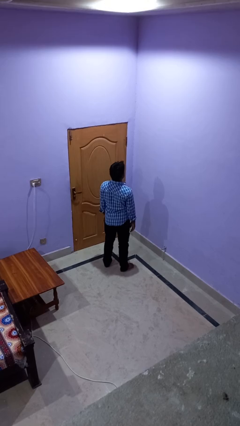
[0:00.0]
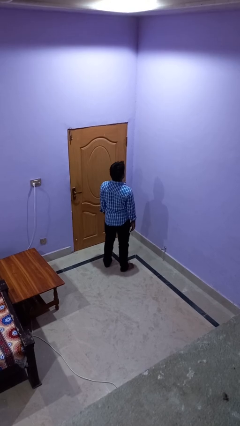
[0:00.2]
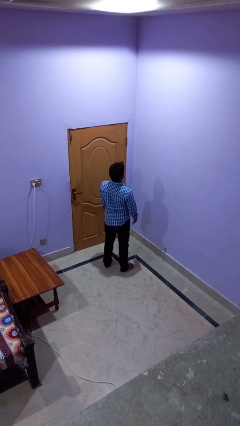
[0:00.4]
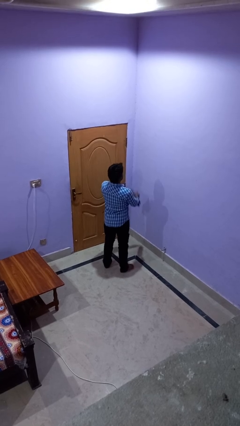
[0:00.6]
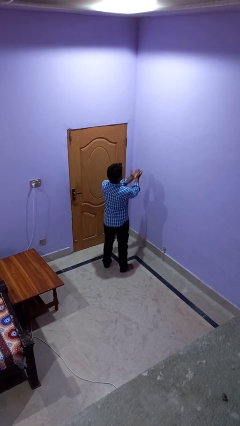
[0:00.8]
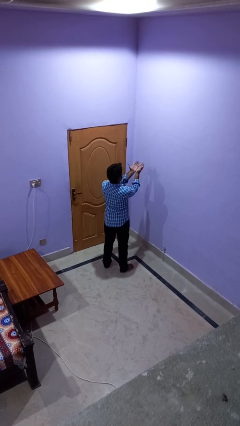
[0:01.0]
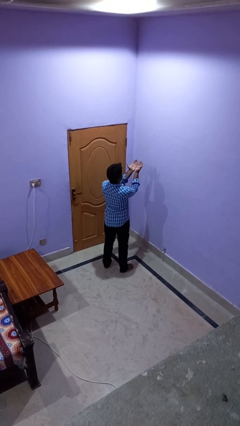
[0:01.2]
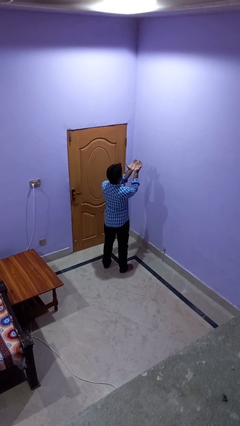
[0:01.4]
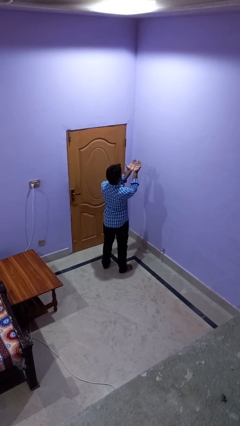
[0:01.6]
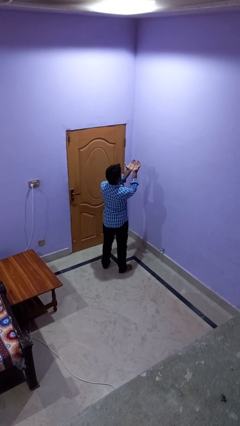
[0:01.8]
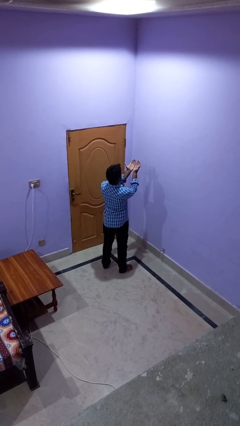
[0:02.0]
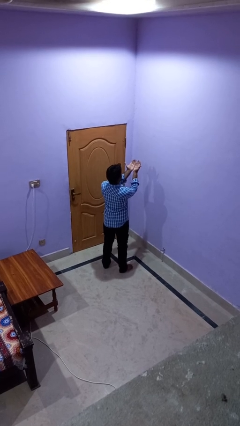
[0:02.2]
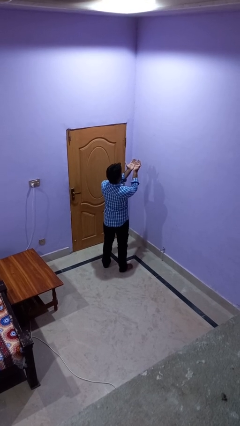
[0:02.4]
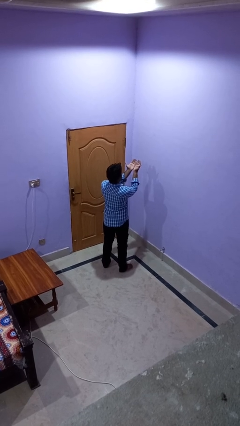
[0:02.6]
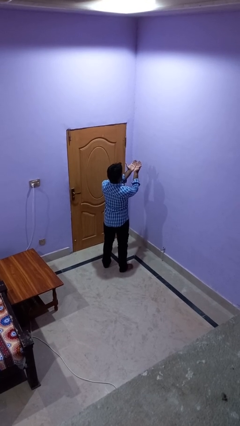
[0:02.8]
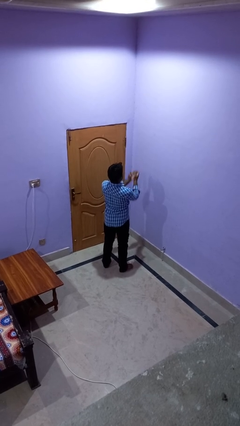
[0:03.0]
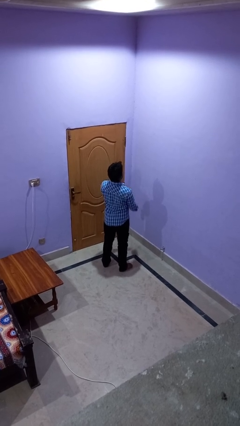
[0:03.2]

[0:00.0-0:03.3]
person prays

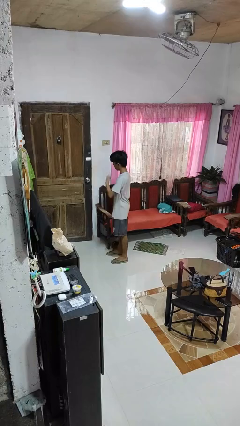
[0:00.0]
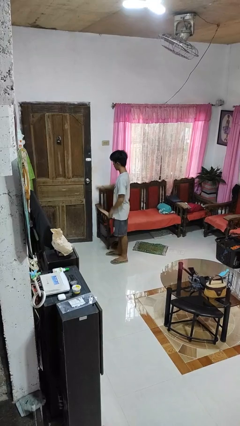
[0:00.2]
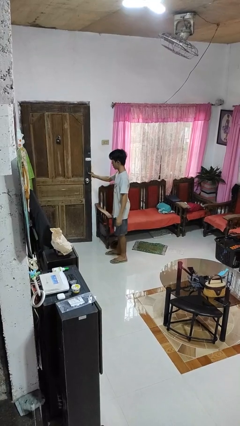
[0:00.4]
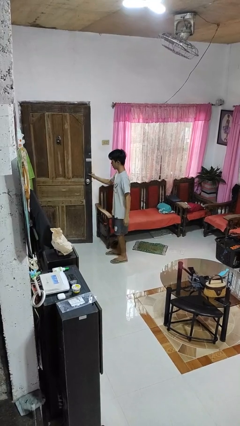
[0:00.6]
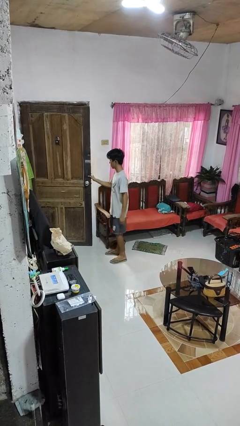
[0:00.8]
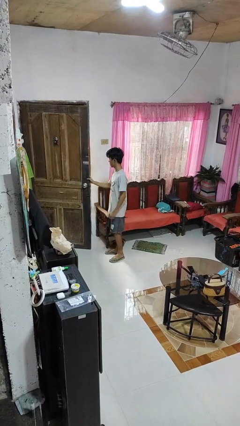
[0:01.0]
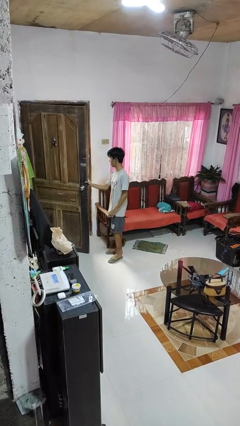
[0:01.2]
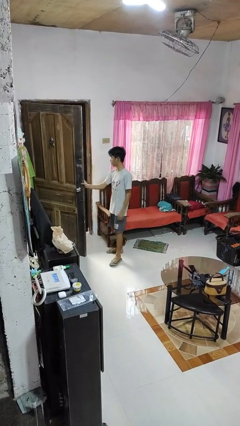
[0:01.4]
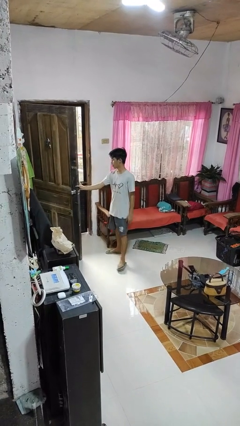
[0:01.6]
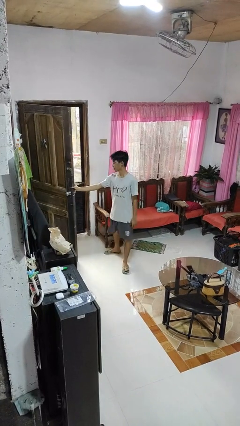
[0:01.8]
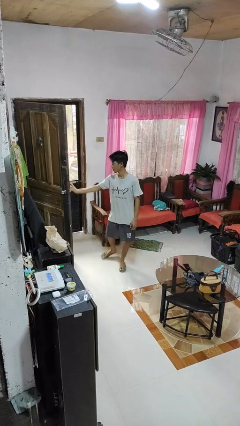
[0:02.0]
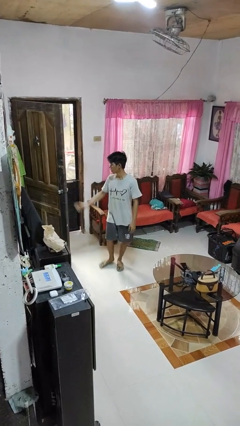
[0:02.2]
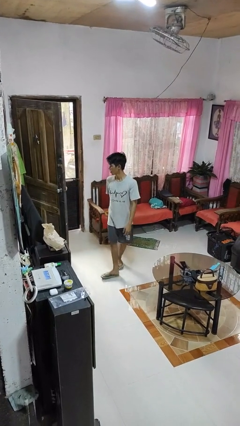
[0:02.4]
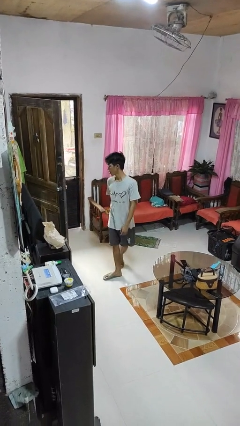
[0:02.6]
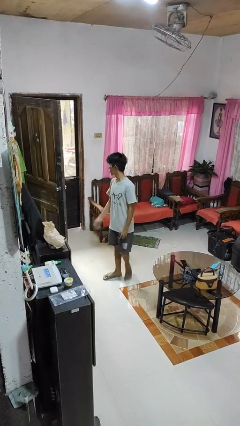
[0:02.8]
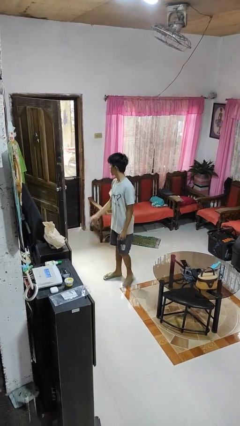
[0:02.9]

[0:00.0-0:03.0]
person opens facility door

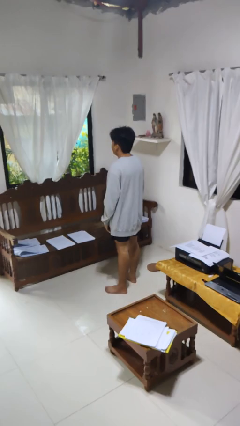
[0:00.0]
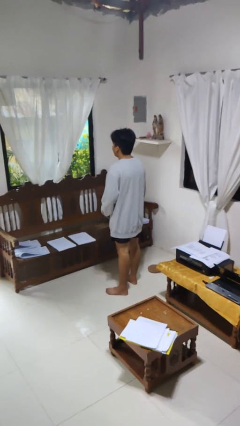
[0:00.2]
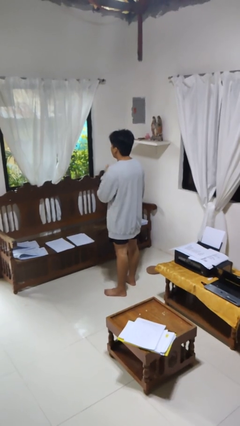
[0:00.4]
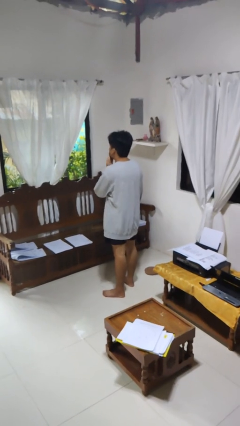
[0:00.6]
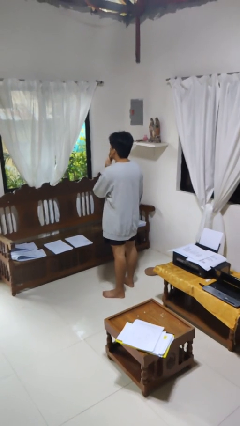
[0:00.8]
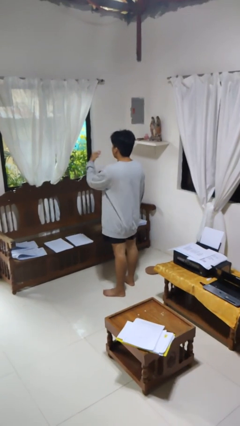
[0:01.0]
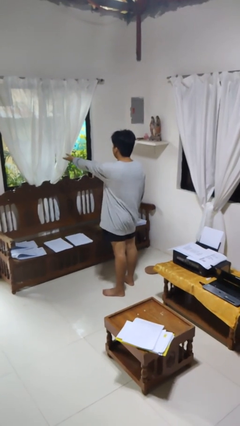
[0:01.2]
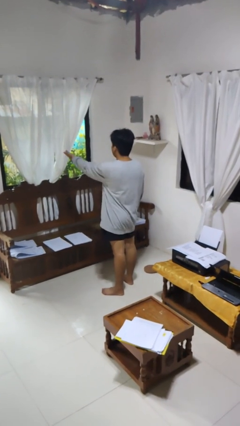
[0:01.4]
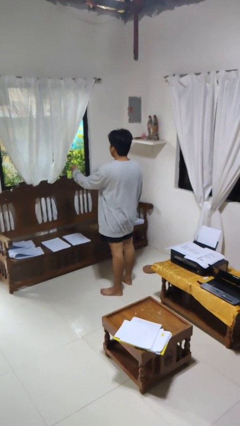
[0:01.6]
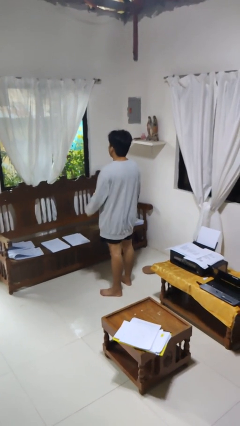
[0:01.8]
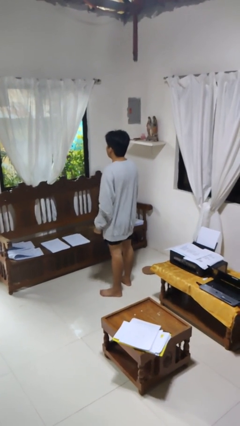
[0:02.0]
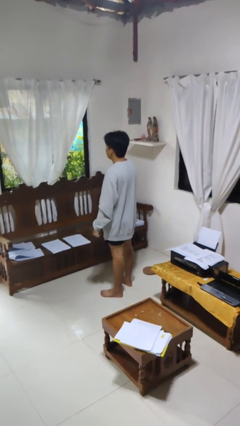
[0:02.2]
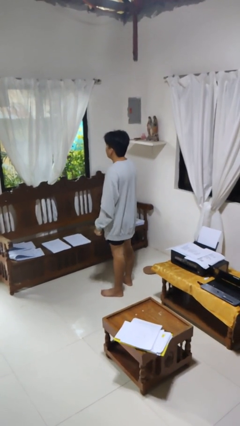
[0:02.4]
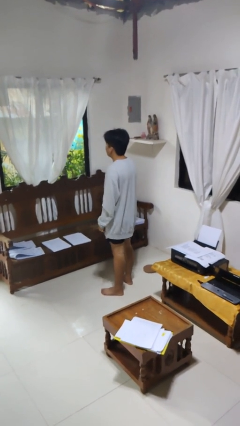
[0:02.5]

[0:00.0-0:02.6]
person gestures blow kiss

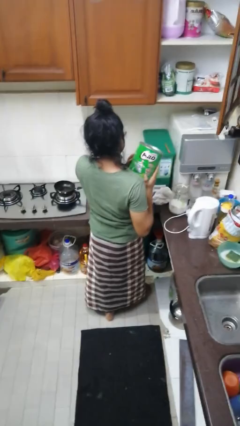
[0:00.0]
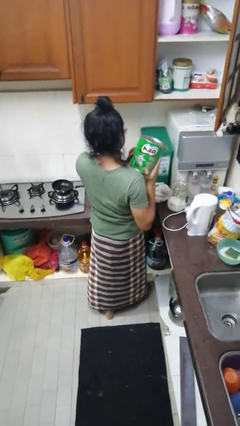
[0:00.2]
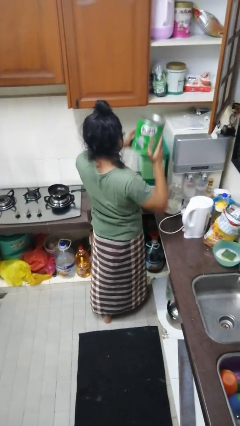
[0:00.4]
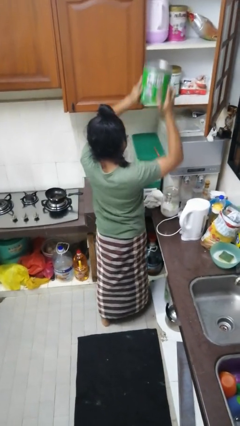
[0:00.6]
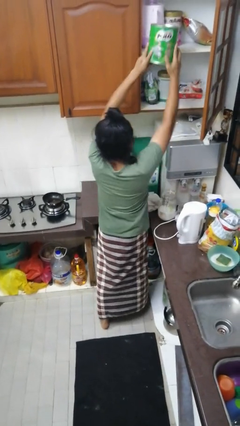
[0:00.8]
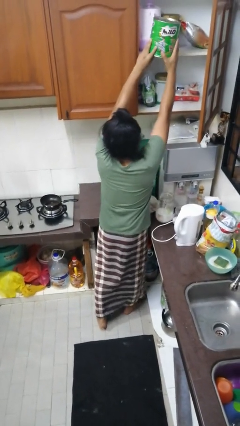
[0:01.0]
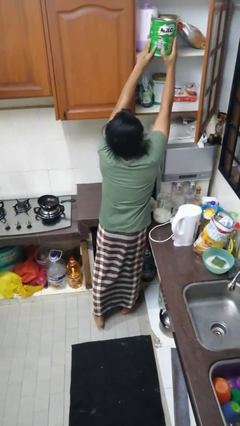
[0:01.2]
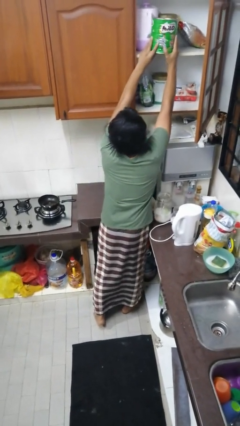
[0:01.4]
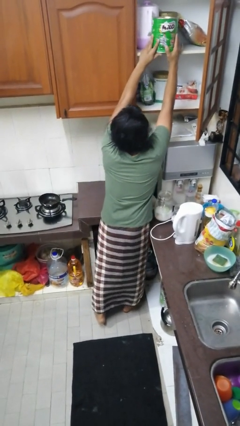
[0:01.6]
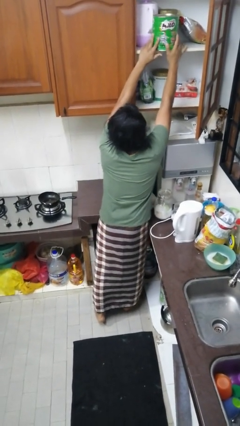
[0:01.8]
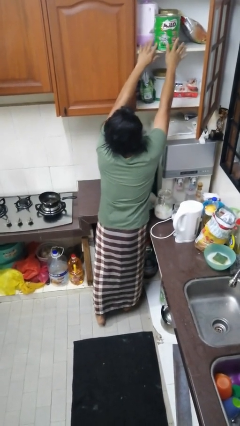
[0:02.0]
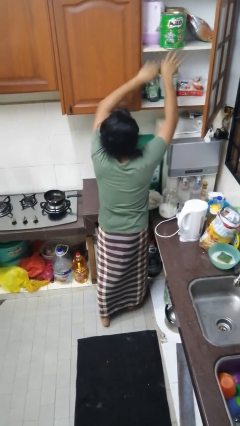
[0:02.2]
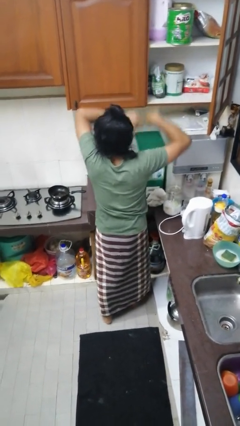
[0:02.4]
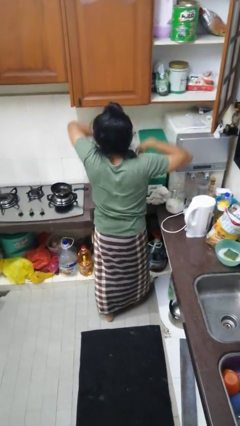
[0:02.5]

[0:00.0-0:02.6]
person puts object in cabinet

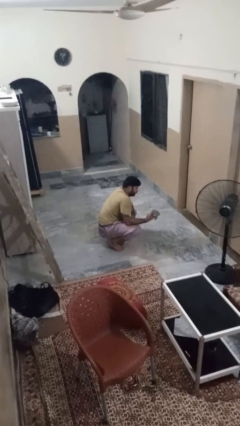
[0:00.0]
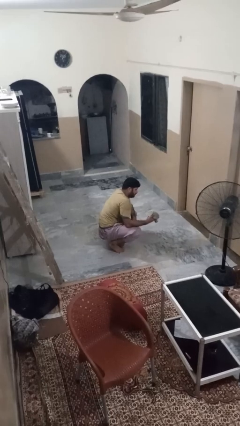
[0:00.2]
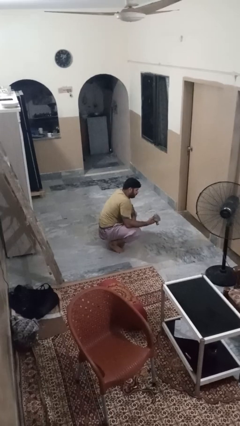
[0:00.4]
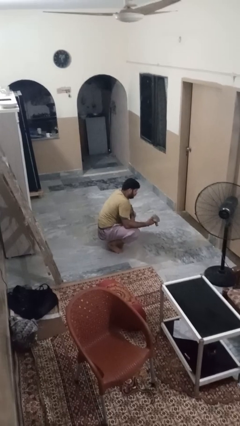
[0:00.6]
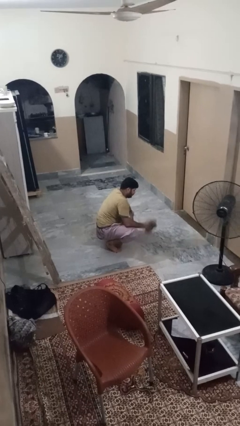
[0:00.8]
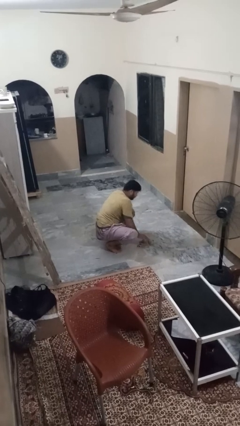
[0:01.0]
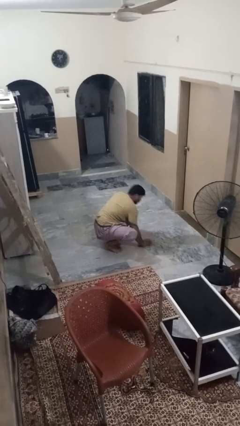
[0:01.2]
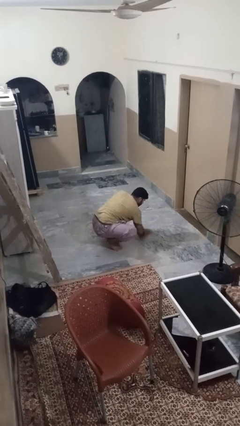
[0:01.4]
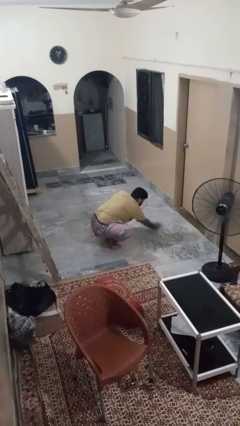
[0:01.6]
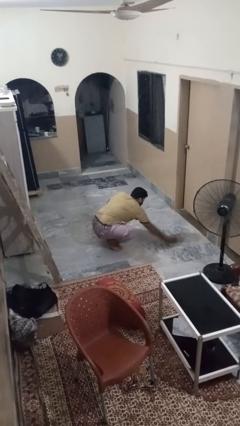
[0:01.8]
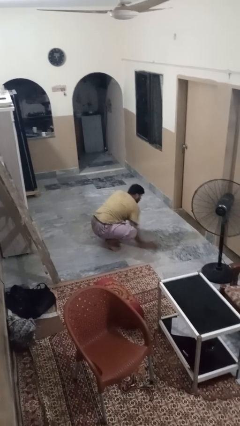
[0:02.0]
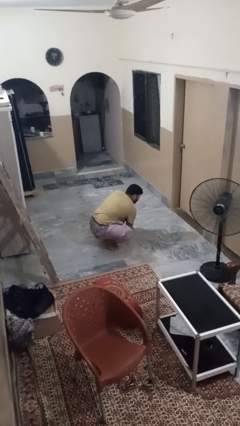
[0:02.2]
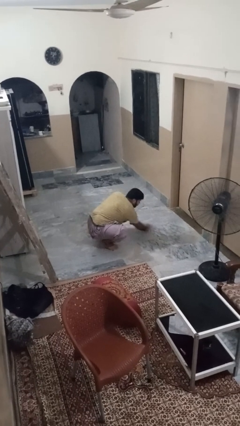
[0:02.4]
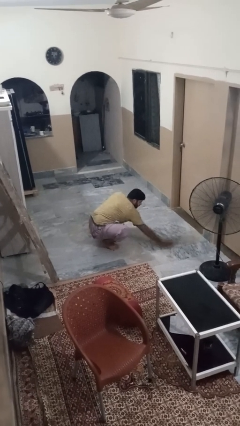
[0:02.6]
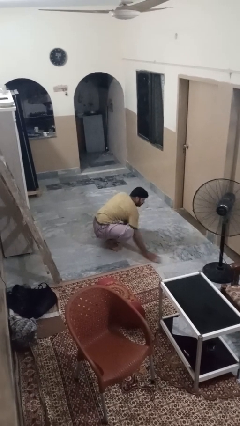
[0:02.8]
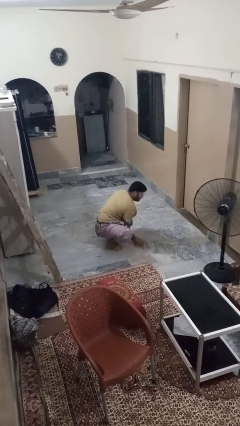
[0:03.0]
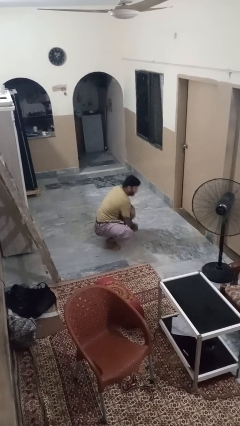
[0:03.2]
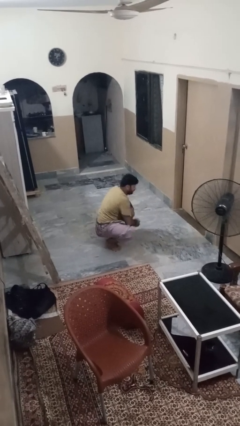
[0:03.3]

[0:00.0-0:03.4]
person mops

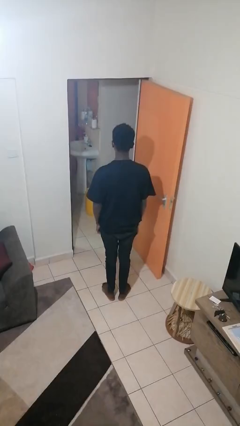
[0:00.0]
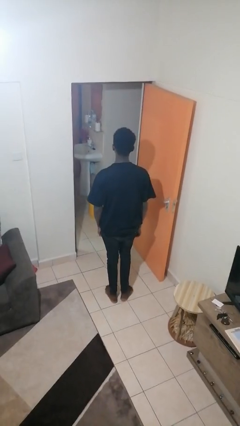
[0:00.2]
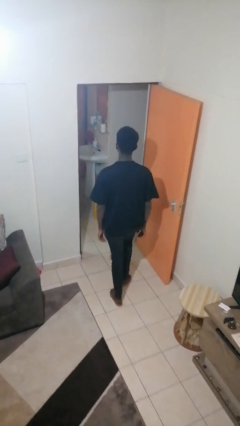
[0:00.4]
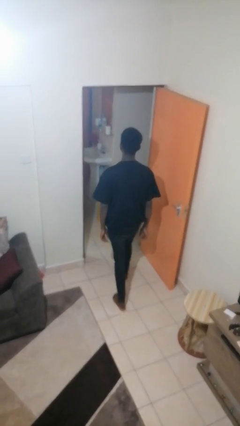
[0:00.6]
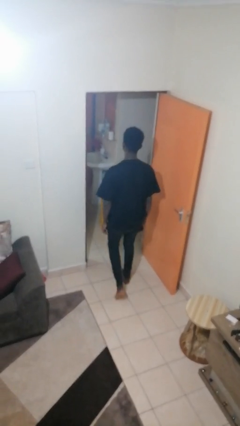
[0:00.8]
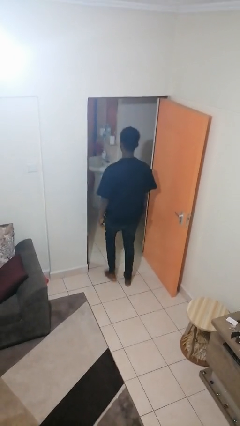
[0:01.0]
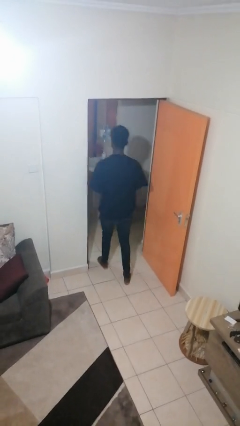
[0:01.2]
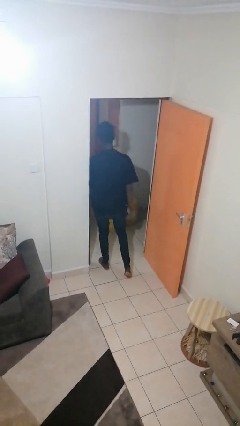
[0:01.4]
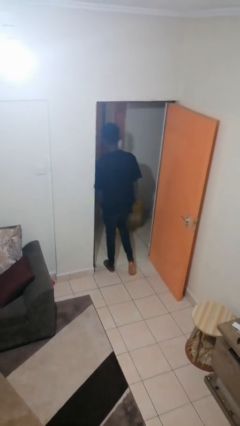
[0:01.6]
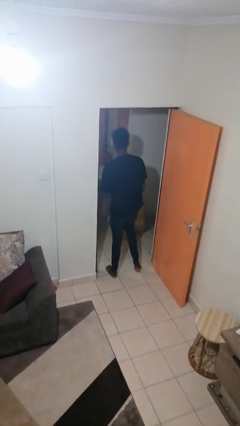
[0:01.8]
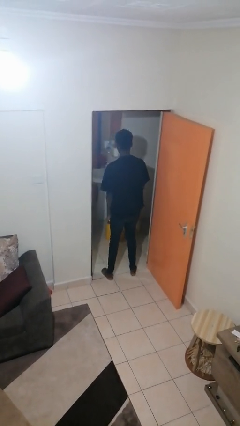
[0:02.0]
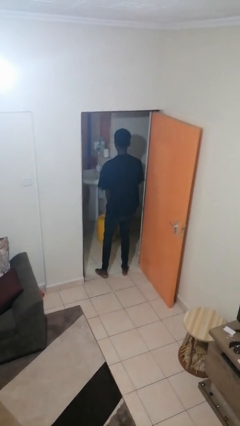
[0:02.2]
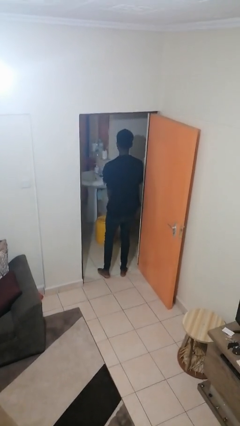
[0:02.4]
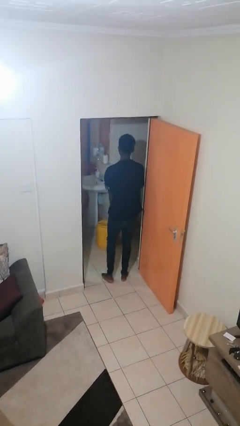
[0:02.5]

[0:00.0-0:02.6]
person bumps into wall
